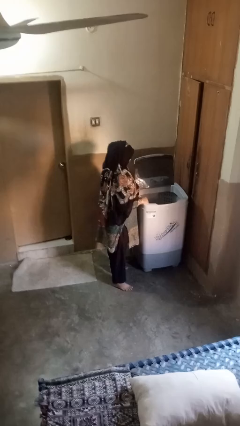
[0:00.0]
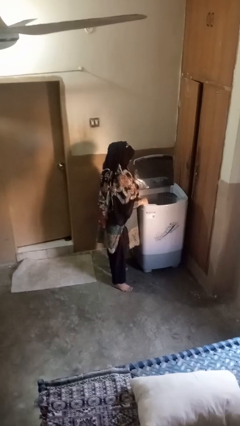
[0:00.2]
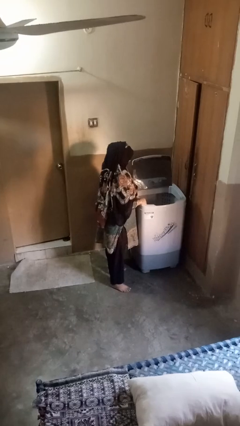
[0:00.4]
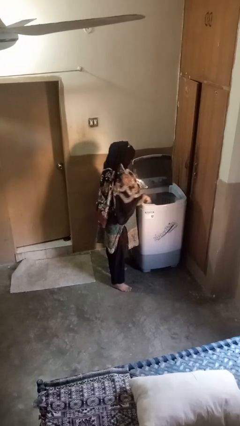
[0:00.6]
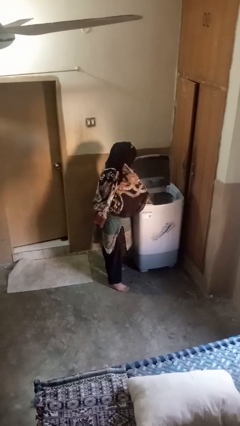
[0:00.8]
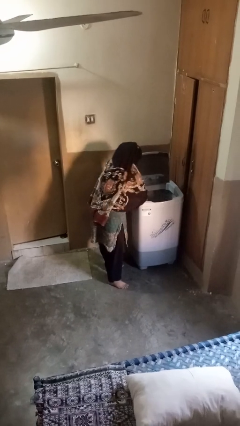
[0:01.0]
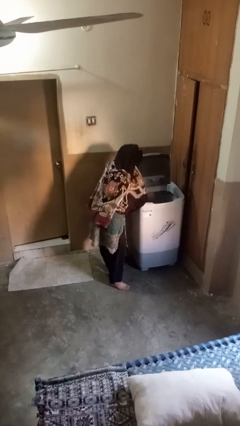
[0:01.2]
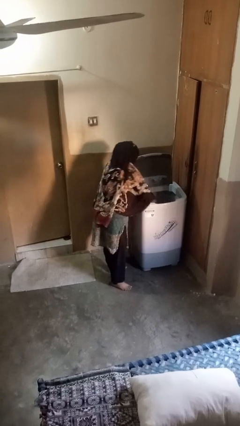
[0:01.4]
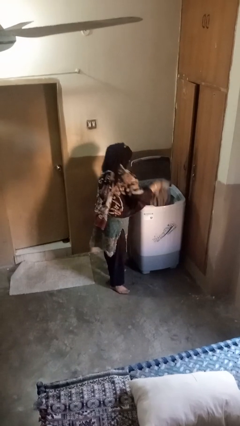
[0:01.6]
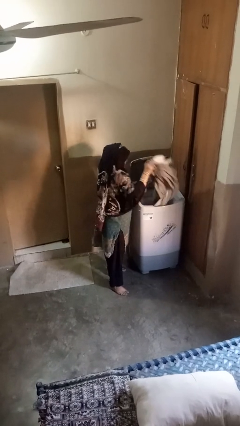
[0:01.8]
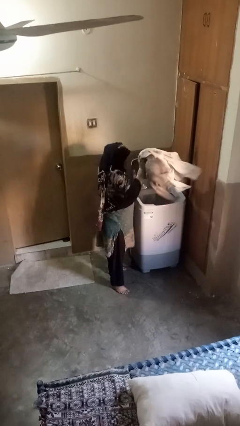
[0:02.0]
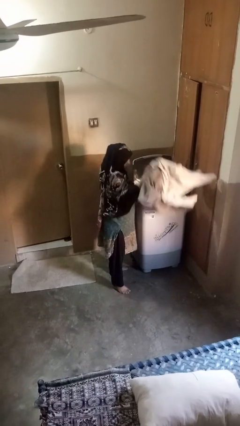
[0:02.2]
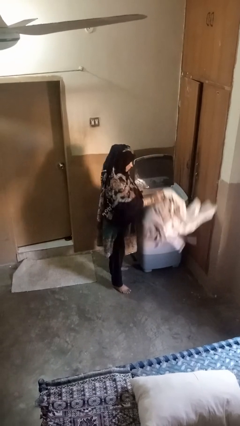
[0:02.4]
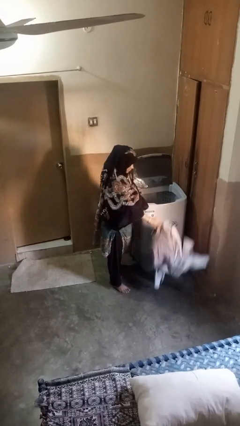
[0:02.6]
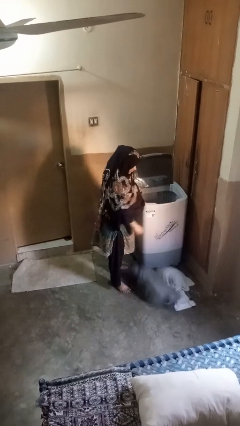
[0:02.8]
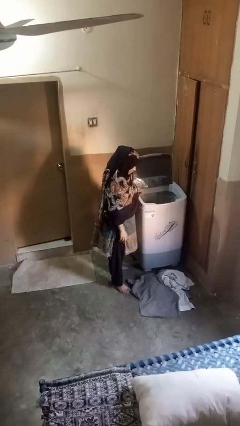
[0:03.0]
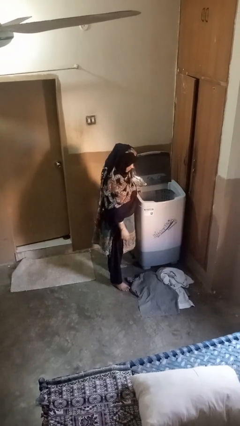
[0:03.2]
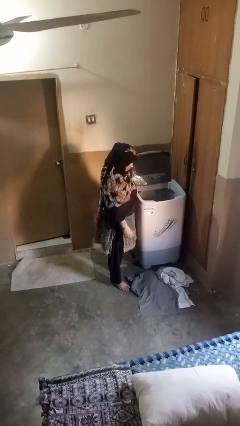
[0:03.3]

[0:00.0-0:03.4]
person unloads clotheswasher

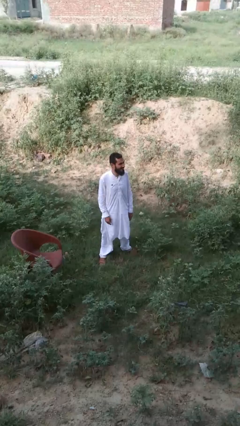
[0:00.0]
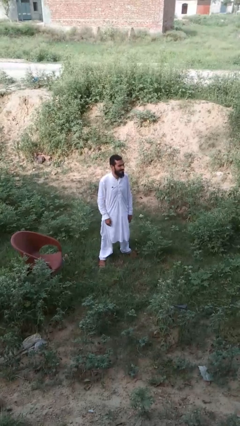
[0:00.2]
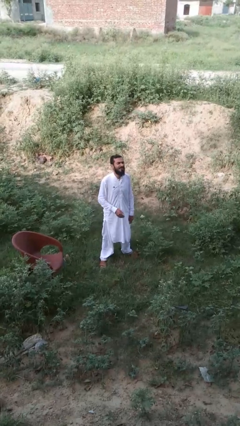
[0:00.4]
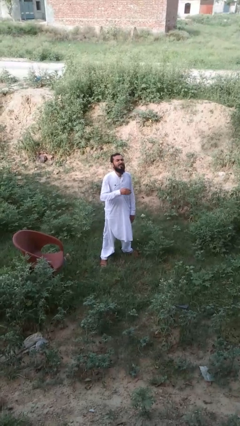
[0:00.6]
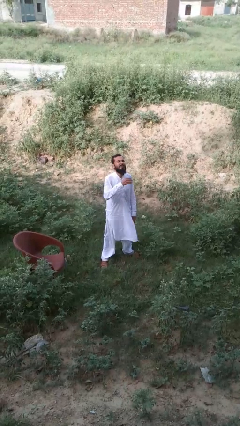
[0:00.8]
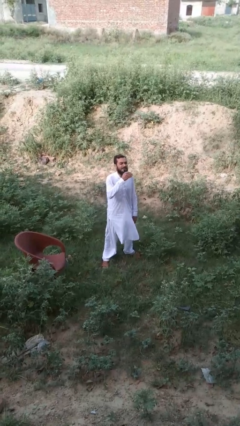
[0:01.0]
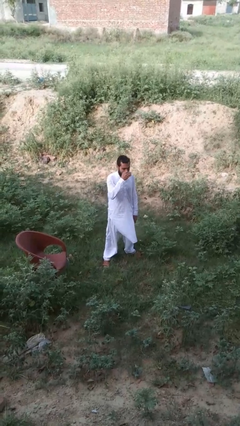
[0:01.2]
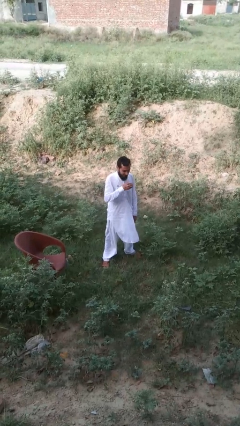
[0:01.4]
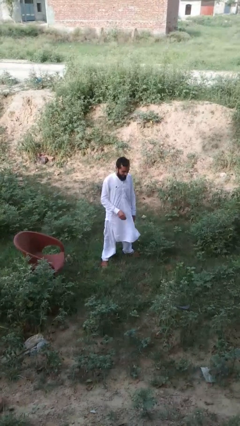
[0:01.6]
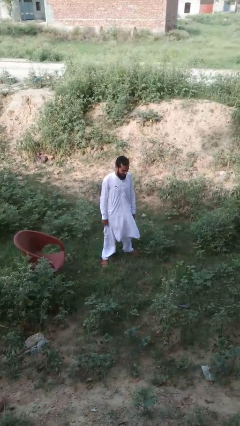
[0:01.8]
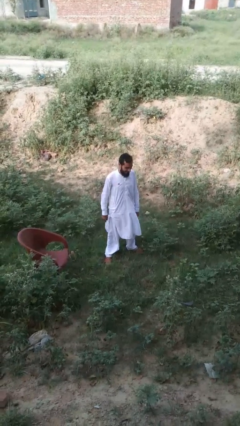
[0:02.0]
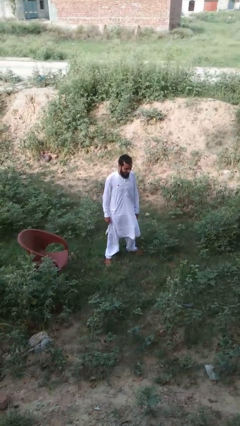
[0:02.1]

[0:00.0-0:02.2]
person sneezes into hand

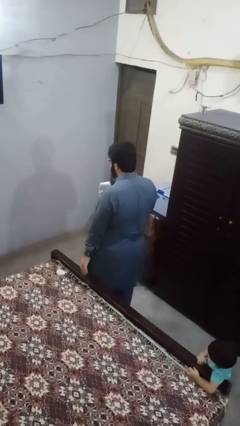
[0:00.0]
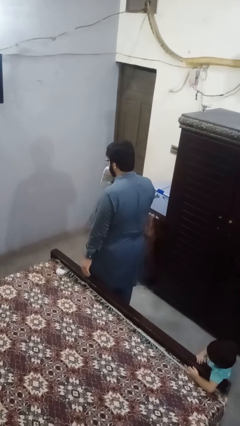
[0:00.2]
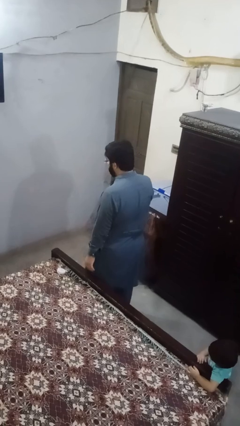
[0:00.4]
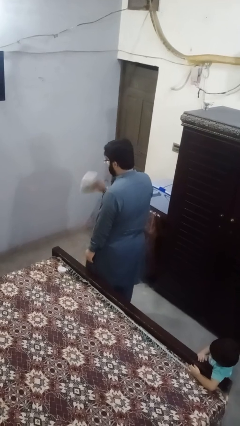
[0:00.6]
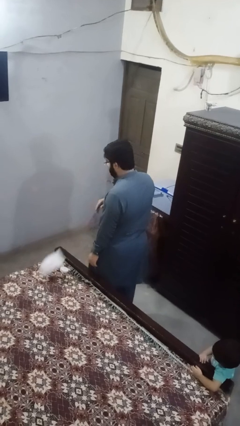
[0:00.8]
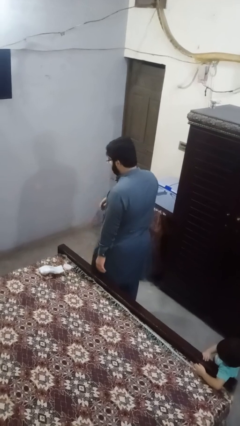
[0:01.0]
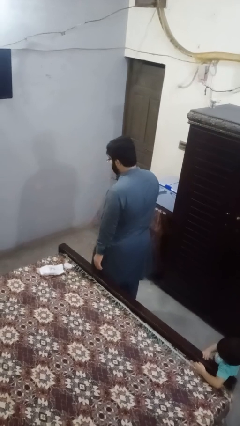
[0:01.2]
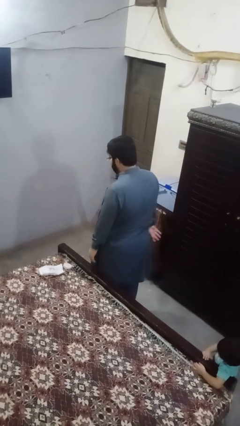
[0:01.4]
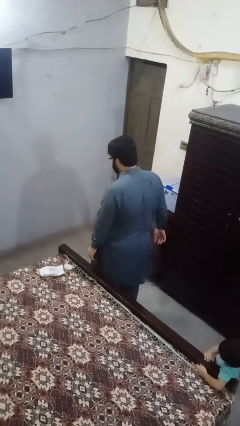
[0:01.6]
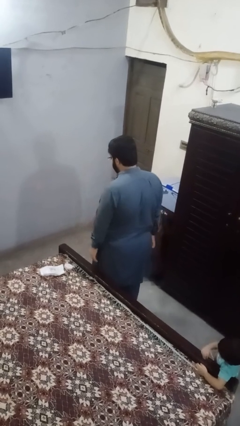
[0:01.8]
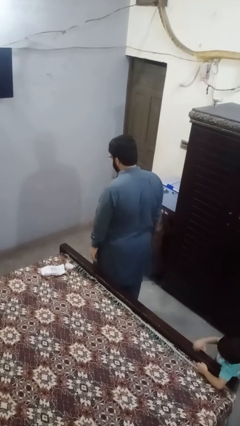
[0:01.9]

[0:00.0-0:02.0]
person throws object on bed

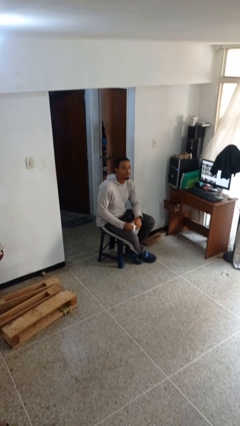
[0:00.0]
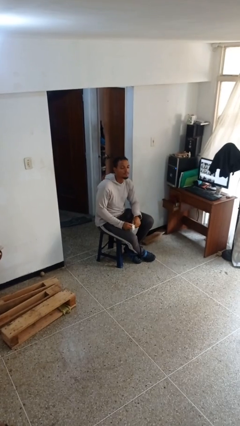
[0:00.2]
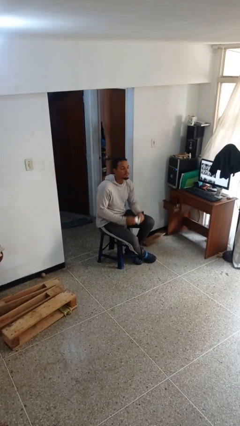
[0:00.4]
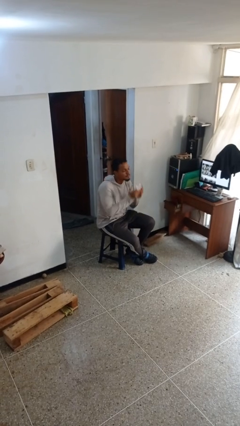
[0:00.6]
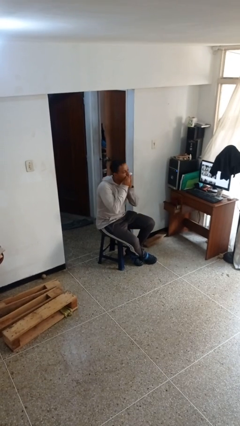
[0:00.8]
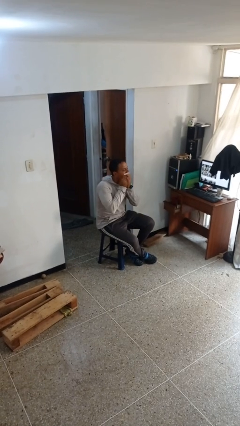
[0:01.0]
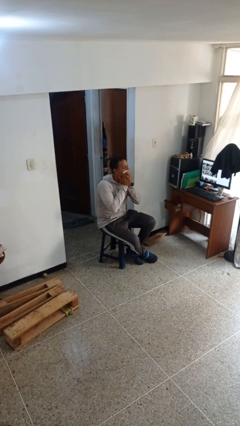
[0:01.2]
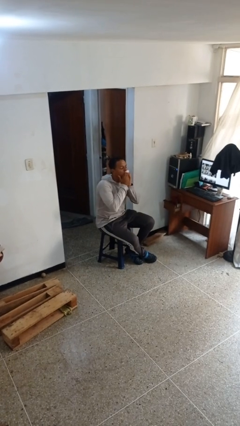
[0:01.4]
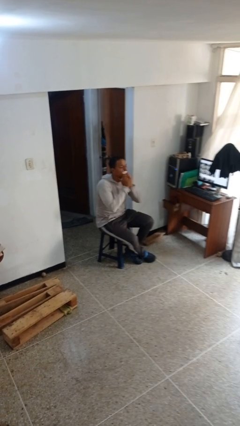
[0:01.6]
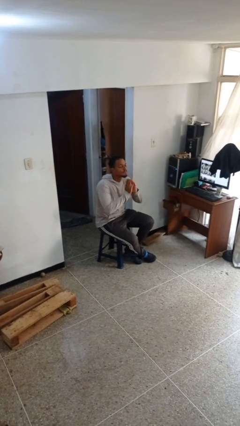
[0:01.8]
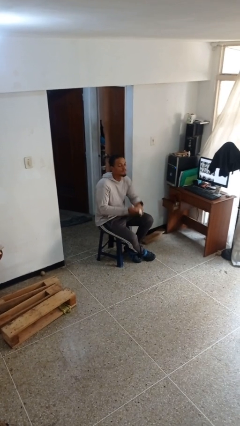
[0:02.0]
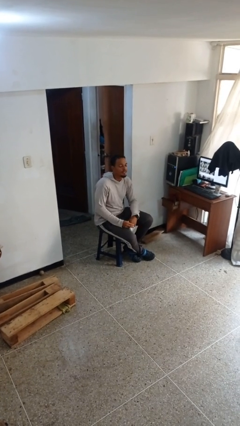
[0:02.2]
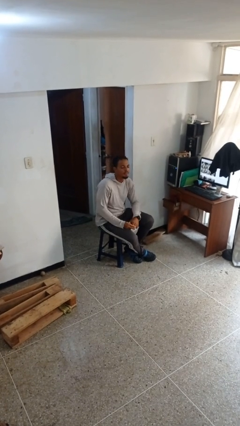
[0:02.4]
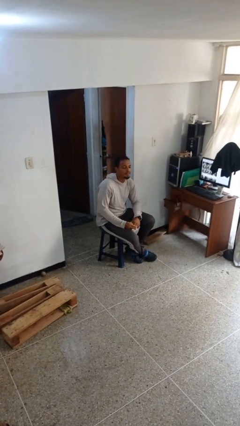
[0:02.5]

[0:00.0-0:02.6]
person wipes mouth with napkin

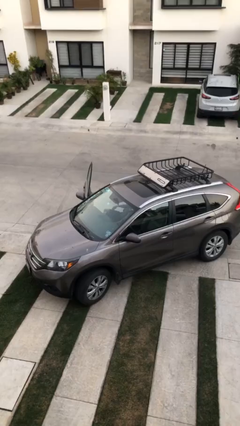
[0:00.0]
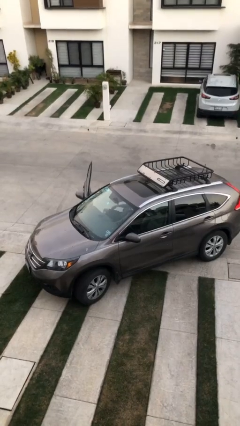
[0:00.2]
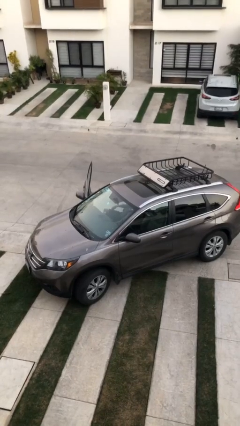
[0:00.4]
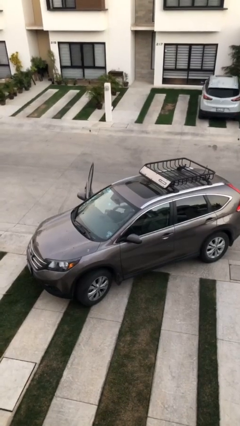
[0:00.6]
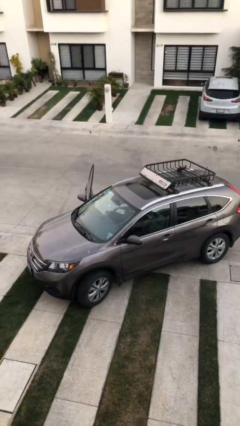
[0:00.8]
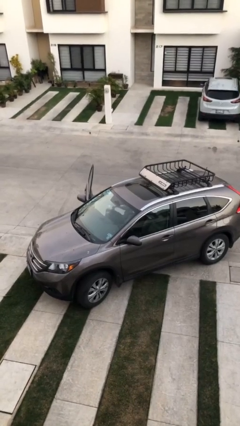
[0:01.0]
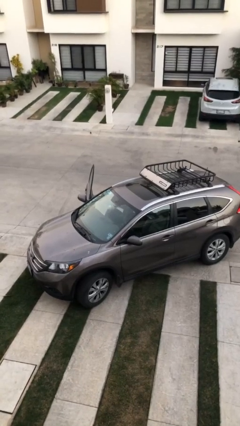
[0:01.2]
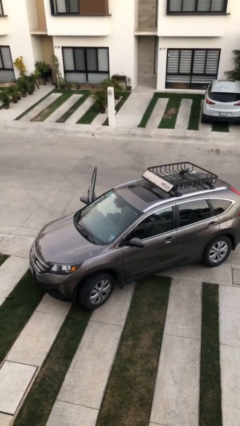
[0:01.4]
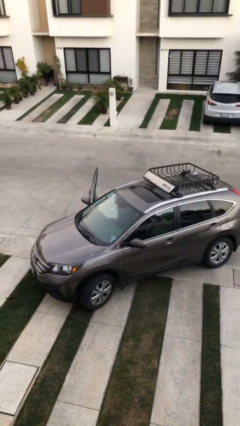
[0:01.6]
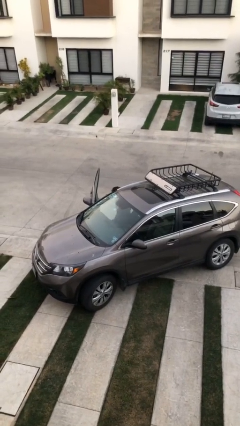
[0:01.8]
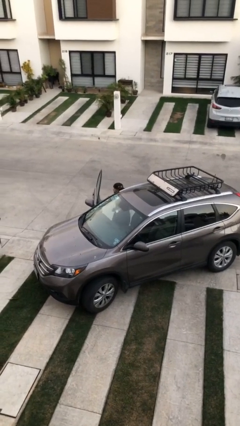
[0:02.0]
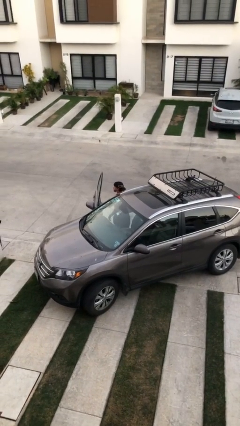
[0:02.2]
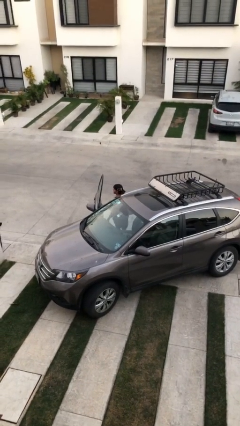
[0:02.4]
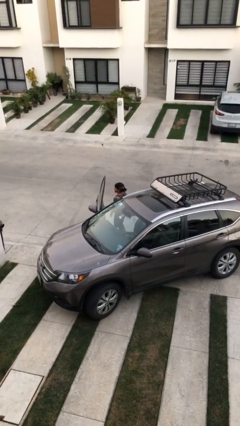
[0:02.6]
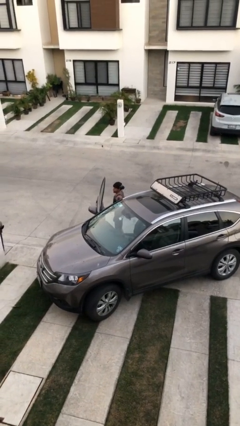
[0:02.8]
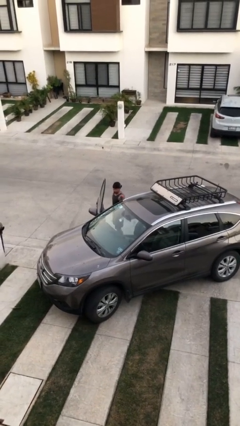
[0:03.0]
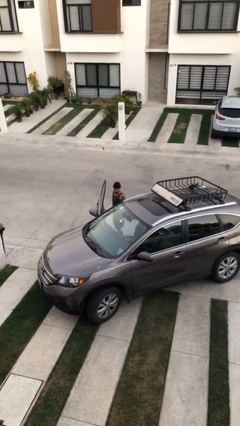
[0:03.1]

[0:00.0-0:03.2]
person exits car

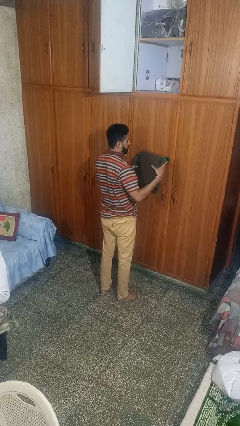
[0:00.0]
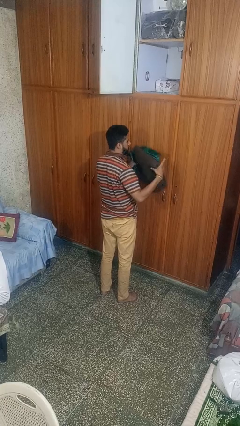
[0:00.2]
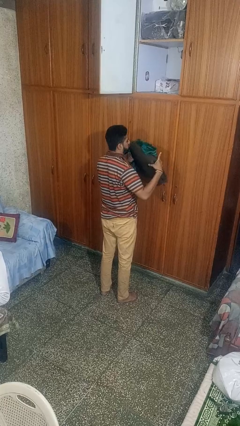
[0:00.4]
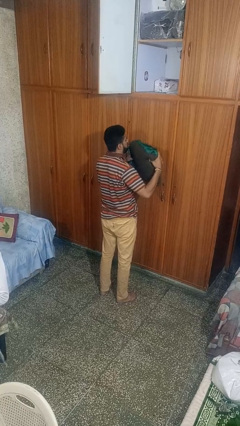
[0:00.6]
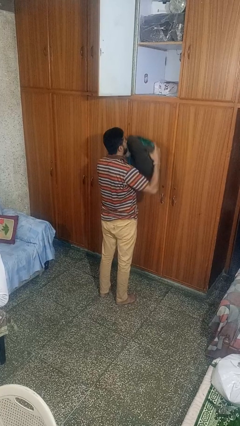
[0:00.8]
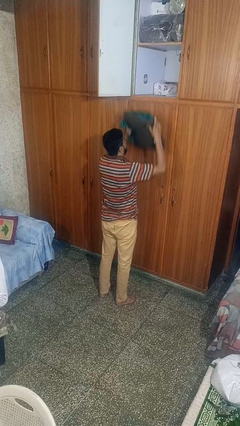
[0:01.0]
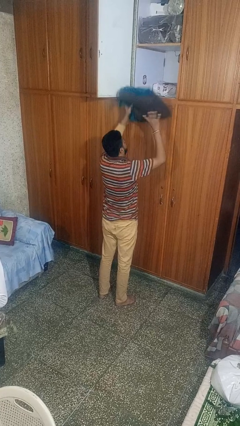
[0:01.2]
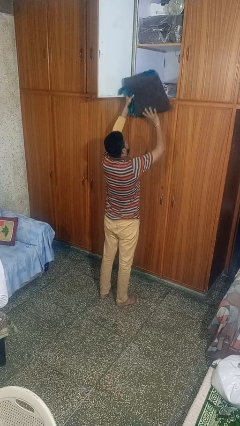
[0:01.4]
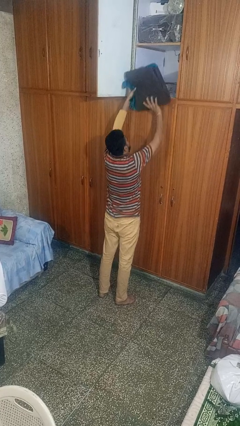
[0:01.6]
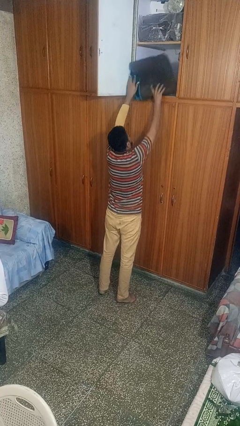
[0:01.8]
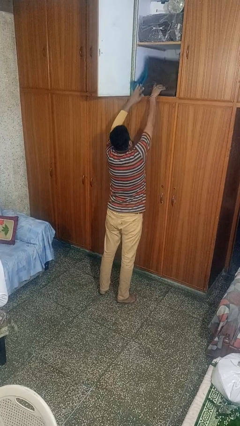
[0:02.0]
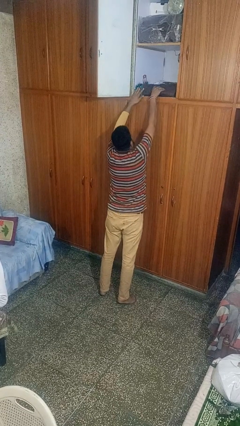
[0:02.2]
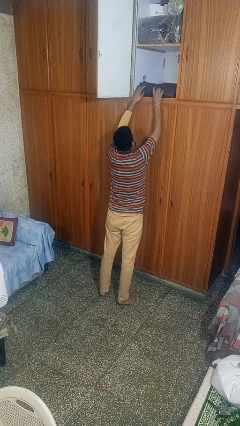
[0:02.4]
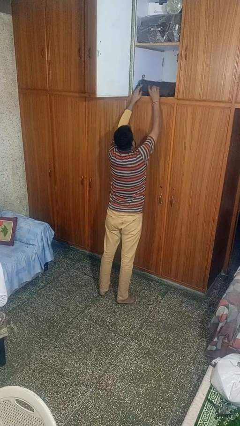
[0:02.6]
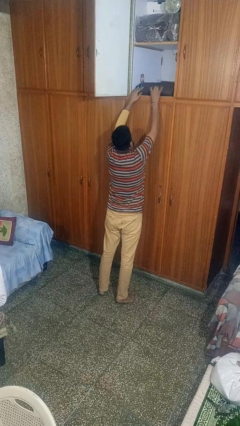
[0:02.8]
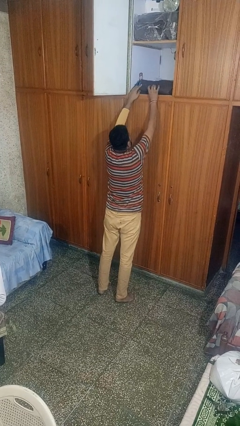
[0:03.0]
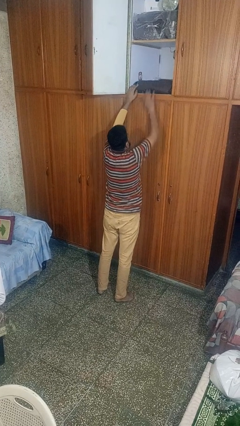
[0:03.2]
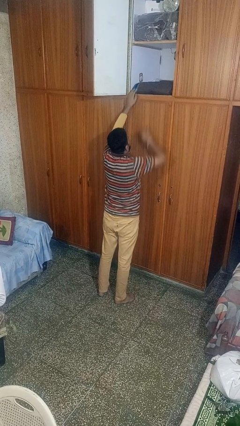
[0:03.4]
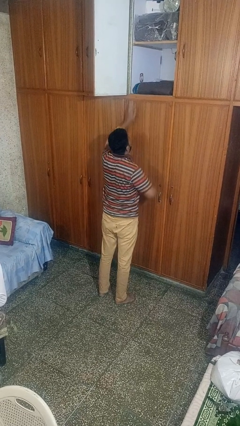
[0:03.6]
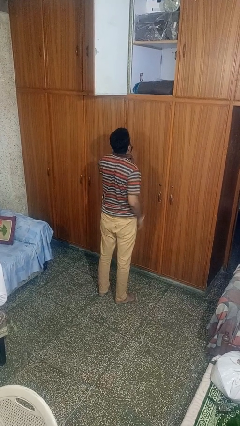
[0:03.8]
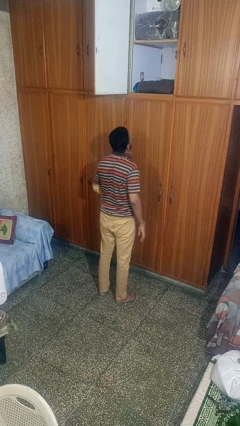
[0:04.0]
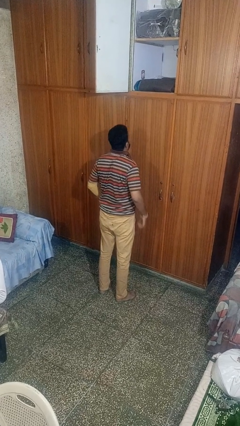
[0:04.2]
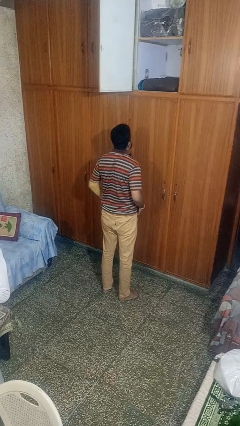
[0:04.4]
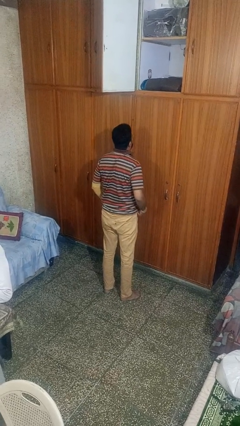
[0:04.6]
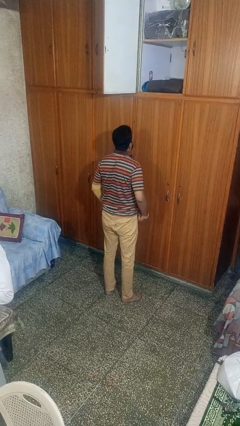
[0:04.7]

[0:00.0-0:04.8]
person puts down object on shelf
